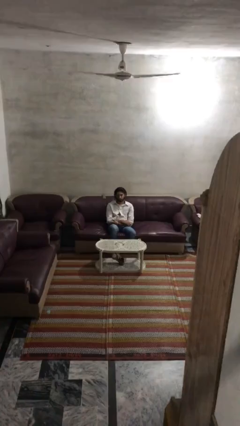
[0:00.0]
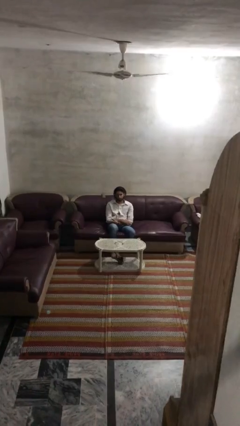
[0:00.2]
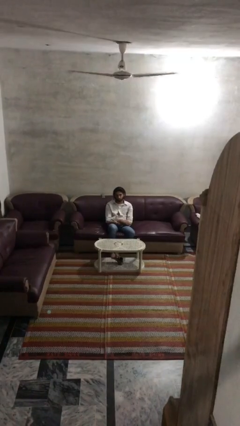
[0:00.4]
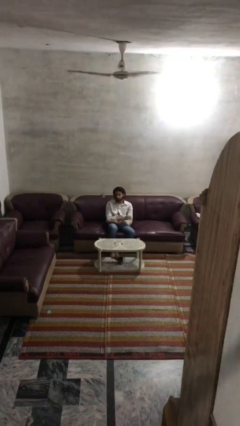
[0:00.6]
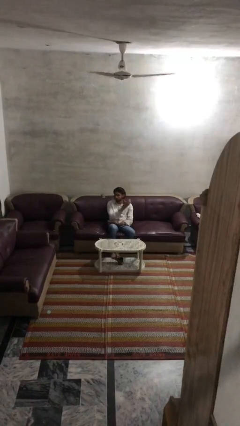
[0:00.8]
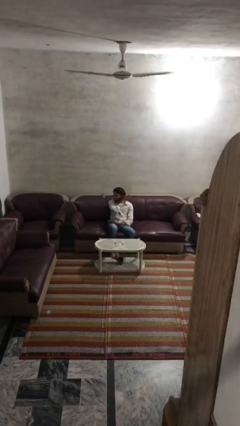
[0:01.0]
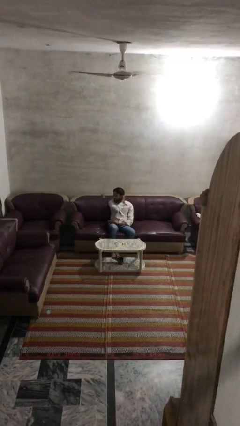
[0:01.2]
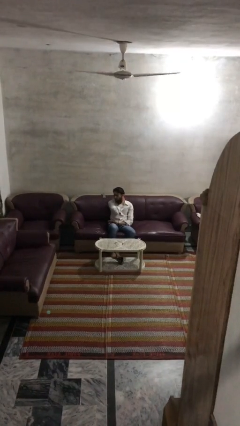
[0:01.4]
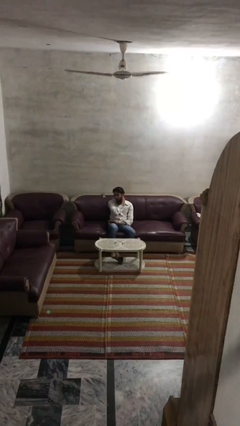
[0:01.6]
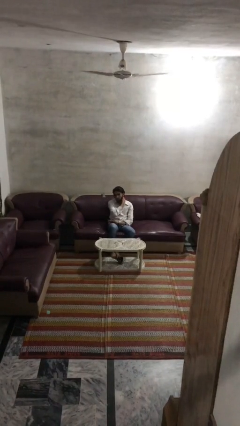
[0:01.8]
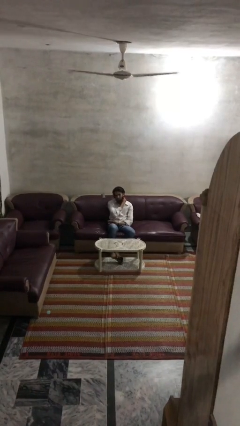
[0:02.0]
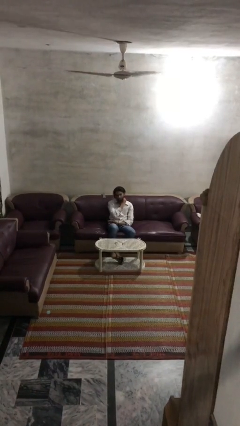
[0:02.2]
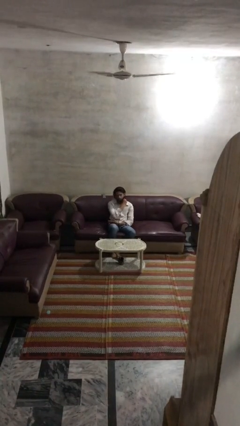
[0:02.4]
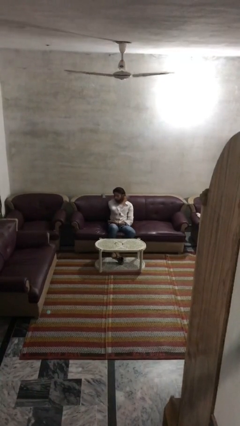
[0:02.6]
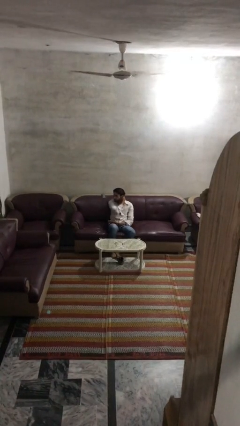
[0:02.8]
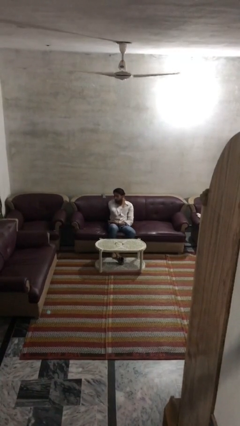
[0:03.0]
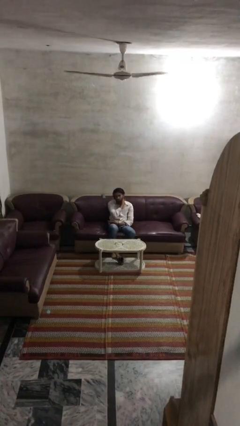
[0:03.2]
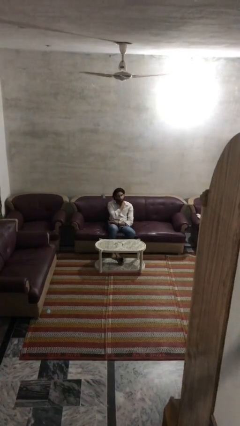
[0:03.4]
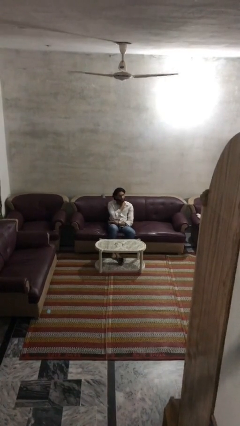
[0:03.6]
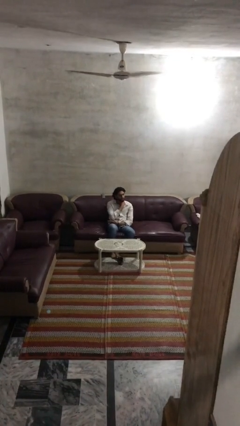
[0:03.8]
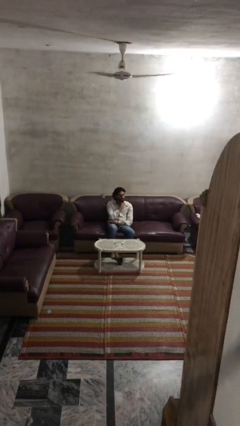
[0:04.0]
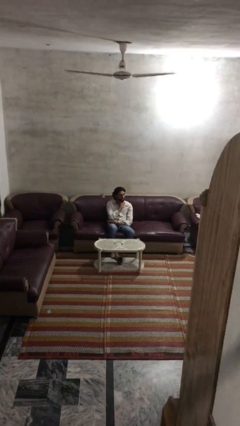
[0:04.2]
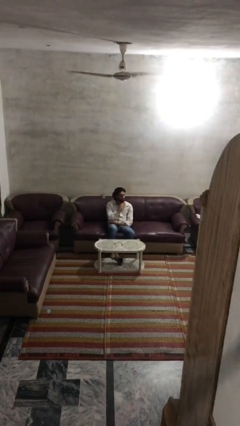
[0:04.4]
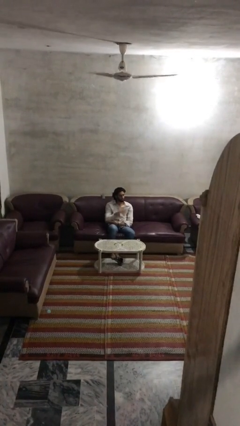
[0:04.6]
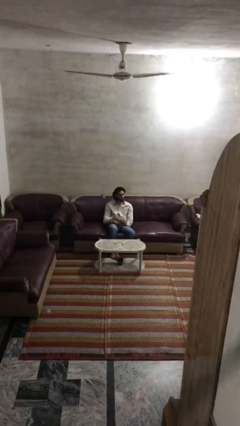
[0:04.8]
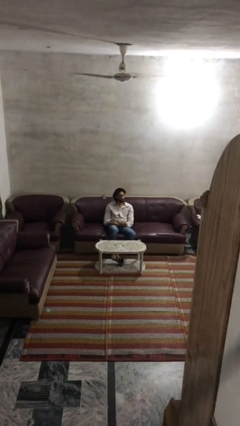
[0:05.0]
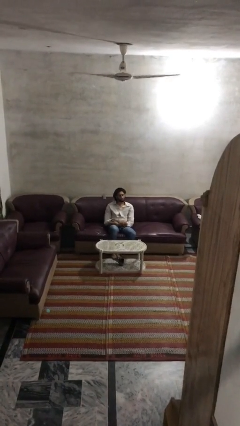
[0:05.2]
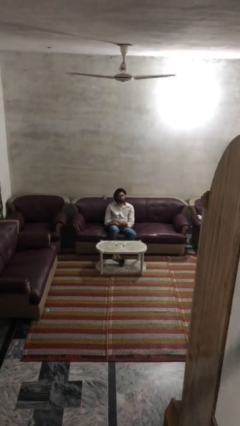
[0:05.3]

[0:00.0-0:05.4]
person strokes hair

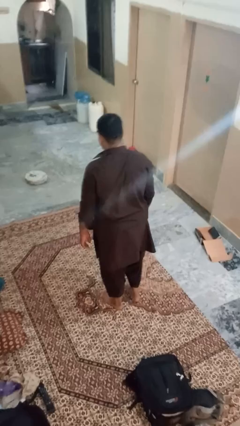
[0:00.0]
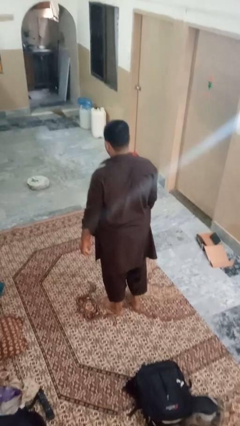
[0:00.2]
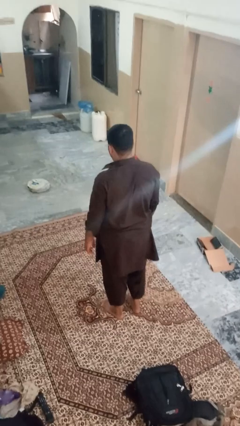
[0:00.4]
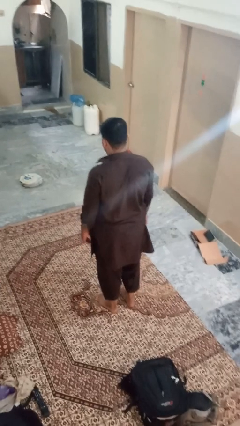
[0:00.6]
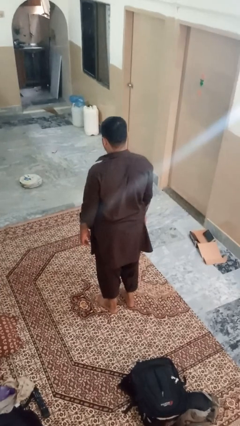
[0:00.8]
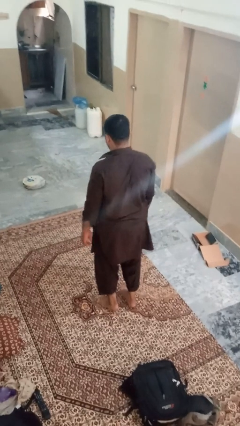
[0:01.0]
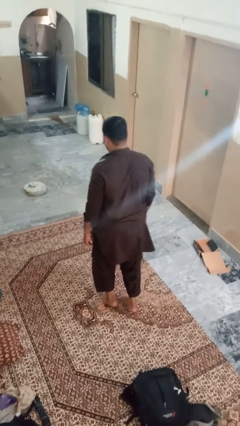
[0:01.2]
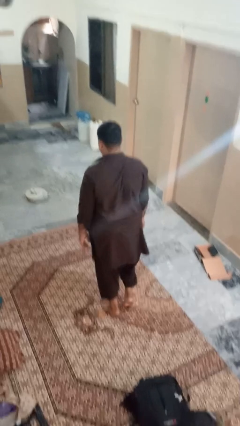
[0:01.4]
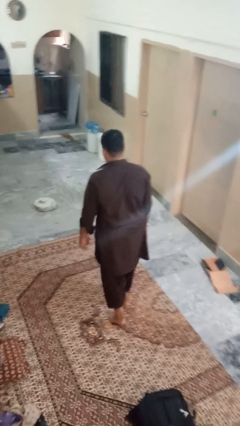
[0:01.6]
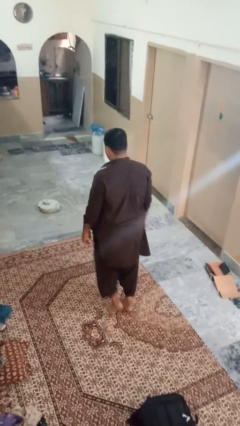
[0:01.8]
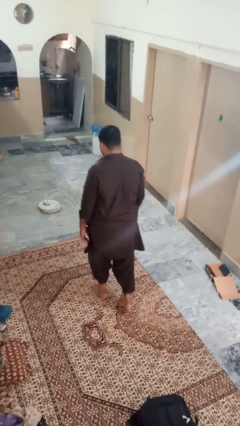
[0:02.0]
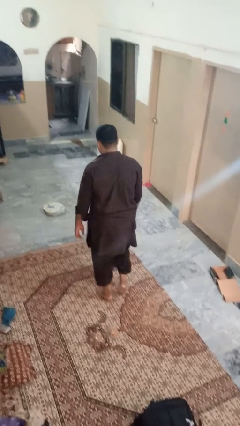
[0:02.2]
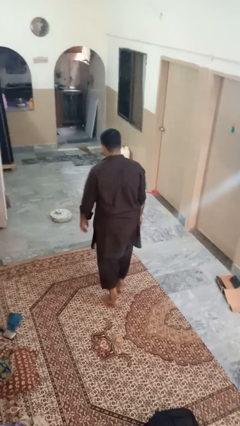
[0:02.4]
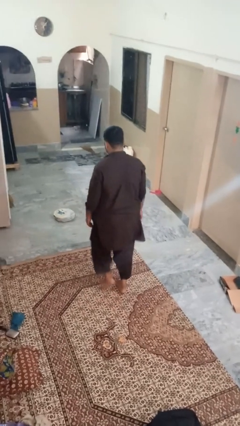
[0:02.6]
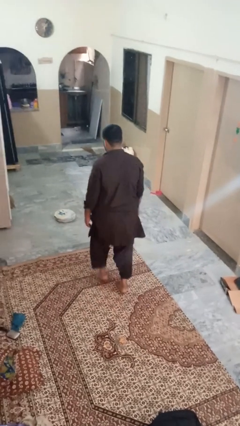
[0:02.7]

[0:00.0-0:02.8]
person walks tiptoe

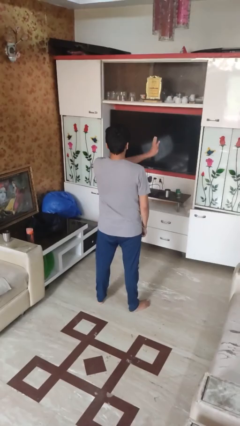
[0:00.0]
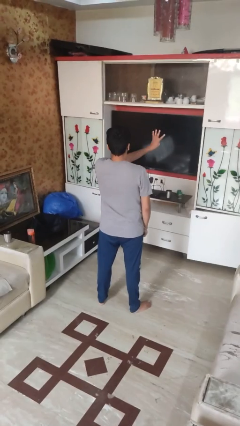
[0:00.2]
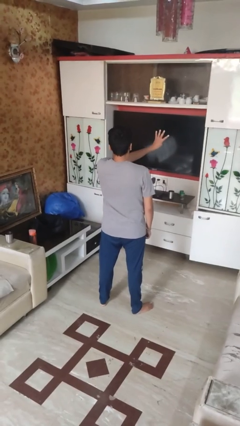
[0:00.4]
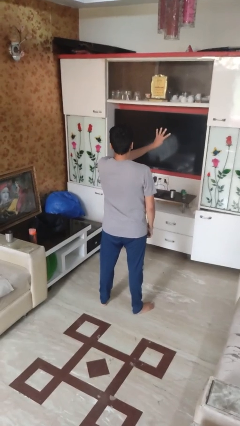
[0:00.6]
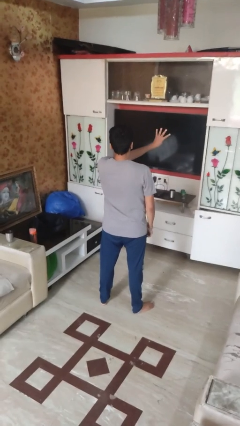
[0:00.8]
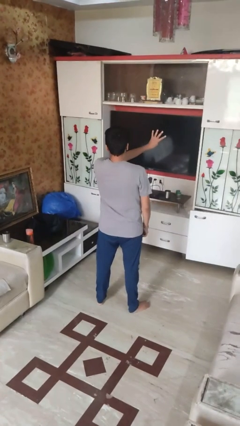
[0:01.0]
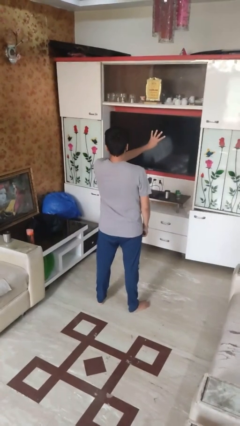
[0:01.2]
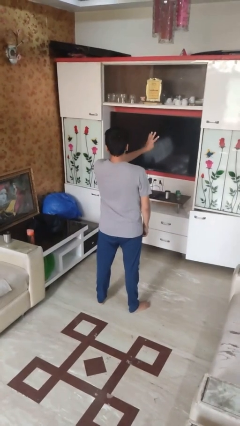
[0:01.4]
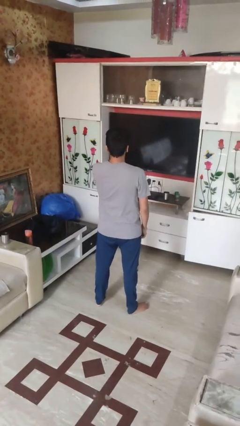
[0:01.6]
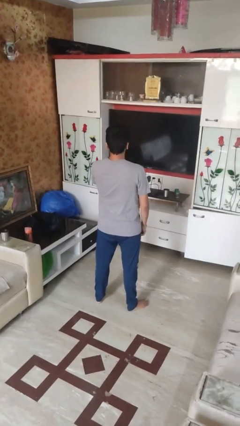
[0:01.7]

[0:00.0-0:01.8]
person gestures number four

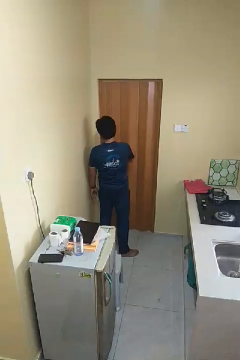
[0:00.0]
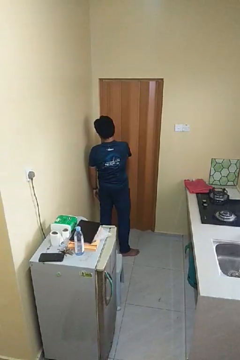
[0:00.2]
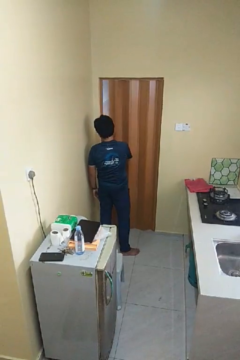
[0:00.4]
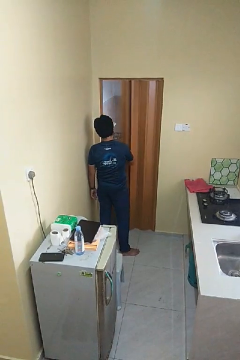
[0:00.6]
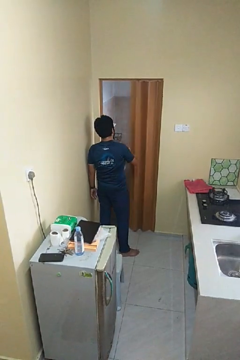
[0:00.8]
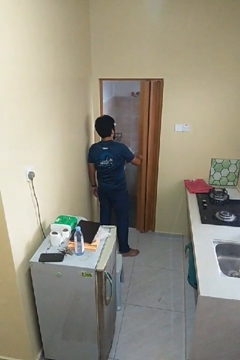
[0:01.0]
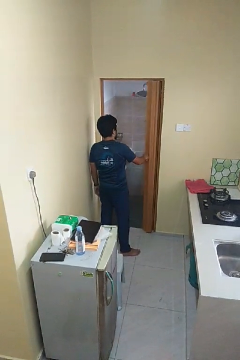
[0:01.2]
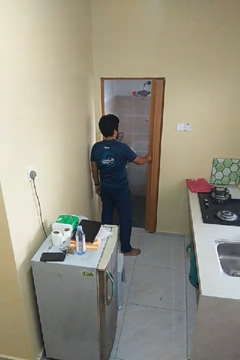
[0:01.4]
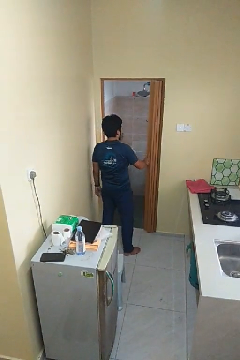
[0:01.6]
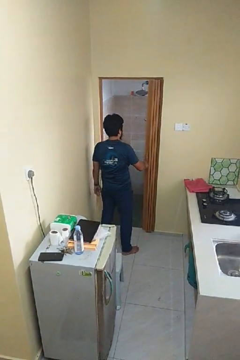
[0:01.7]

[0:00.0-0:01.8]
person opens sliding door

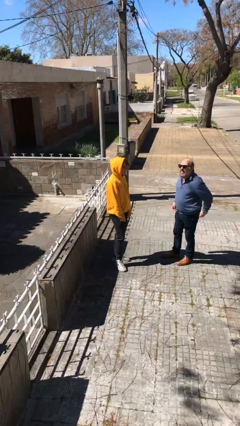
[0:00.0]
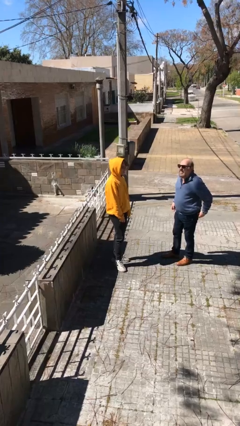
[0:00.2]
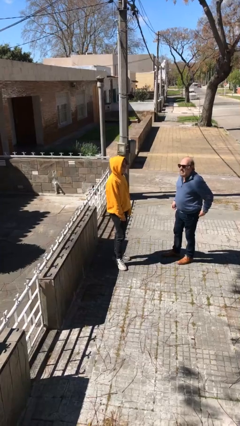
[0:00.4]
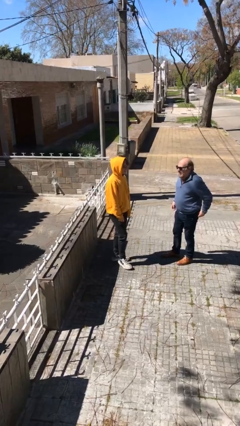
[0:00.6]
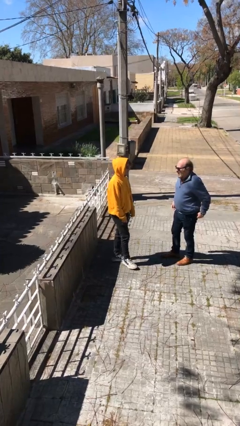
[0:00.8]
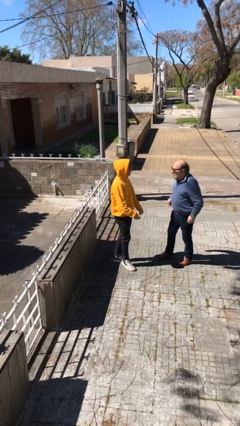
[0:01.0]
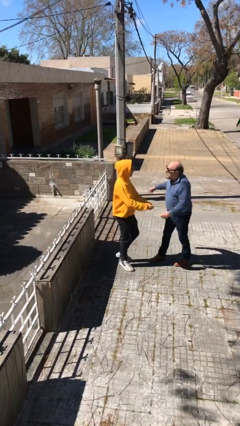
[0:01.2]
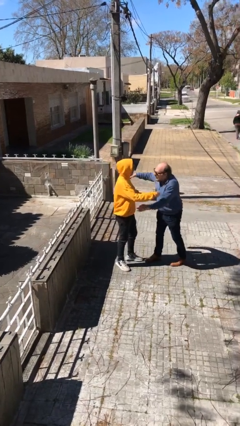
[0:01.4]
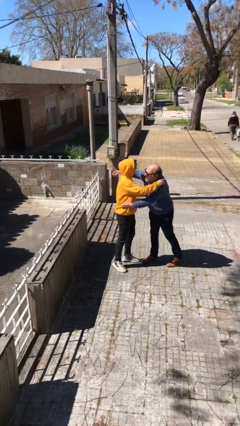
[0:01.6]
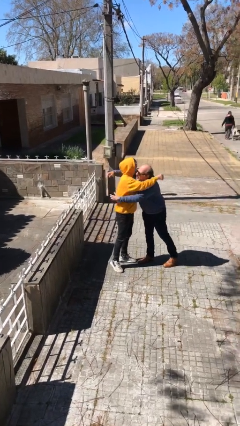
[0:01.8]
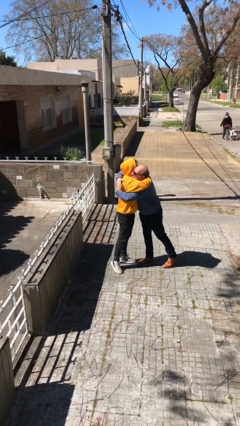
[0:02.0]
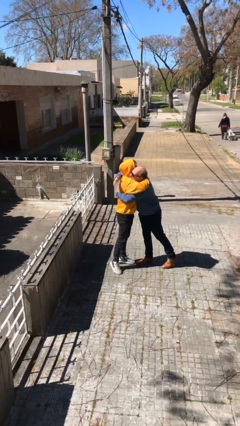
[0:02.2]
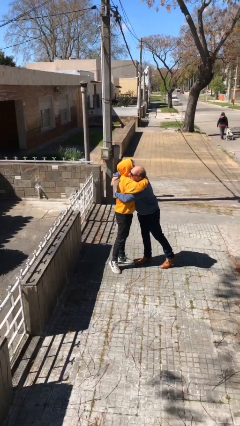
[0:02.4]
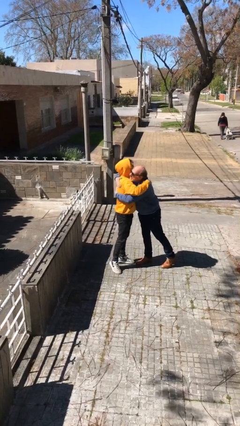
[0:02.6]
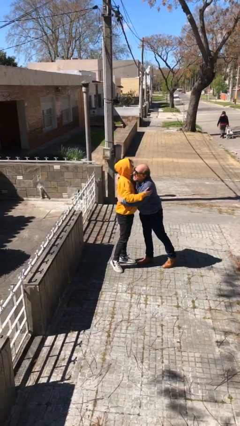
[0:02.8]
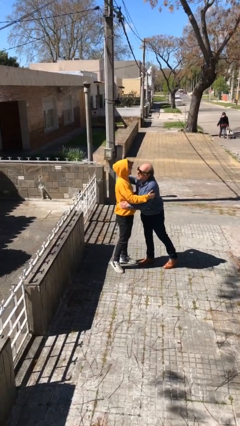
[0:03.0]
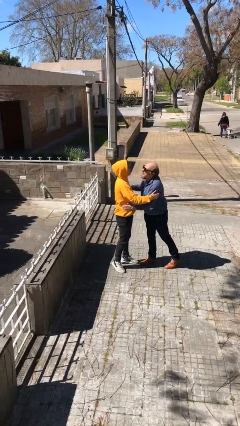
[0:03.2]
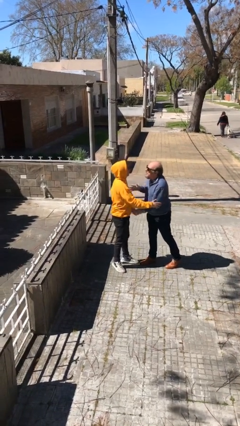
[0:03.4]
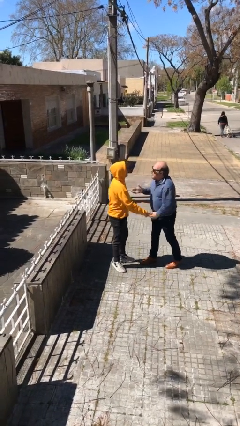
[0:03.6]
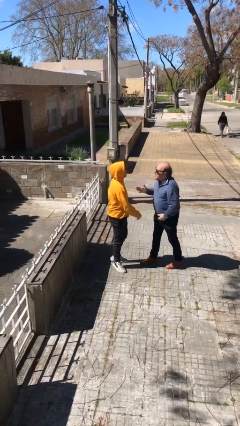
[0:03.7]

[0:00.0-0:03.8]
person embraces person

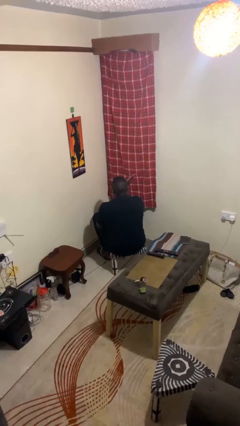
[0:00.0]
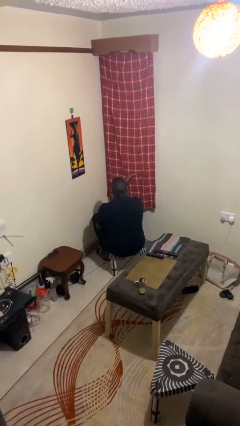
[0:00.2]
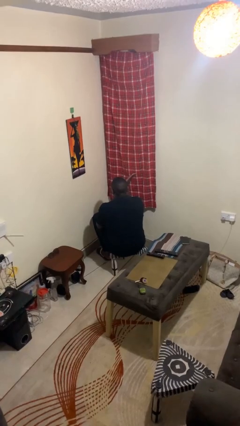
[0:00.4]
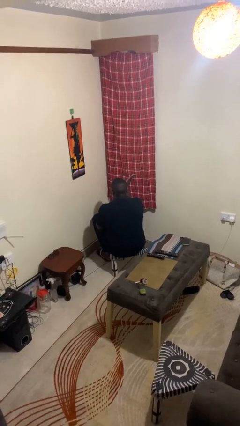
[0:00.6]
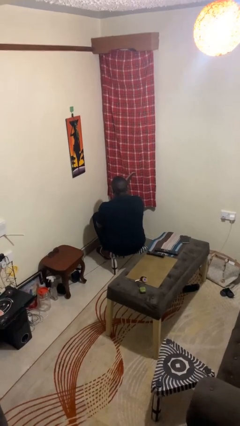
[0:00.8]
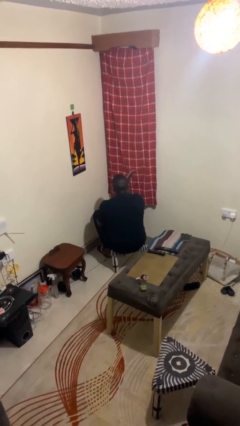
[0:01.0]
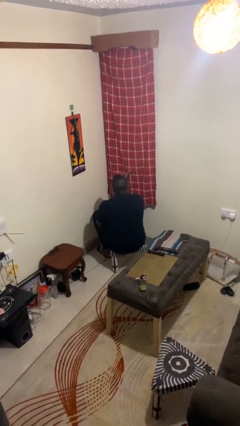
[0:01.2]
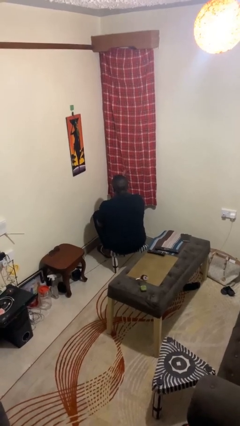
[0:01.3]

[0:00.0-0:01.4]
person gestures swipe right

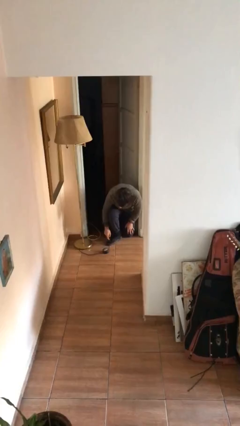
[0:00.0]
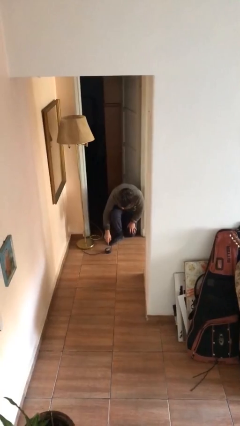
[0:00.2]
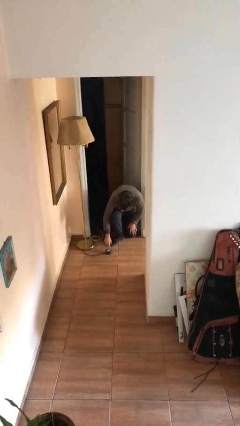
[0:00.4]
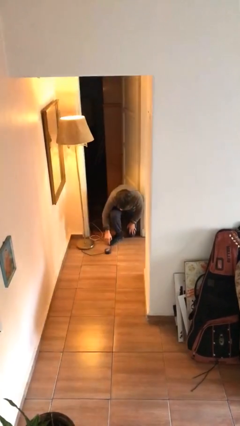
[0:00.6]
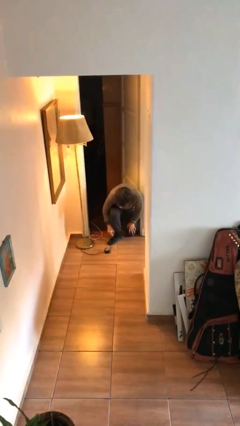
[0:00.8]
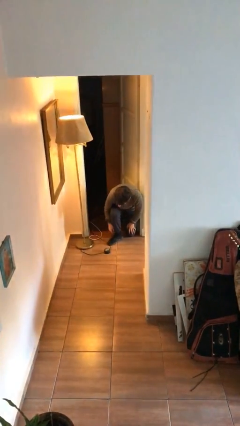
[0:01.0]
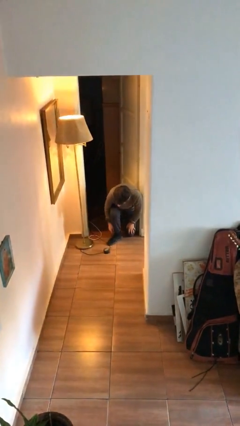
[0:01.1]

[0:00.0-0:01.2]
person turns on lamp
